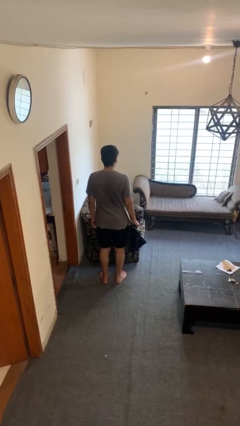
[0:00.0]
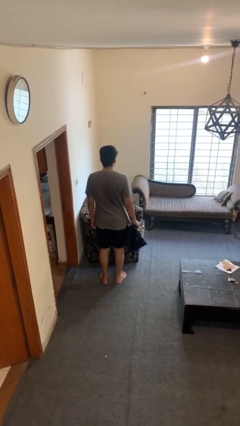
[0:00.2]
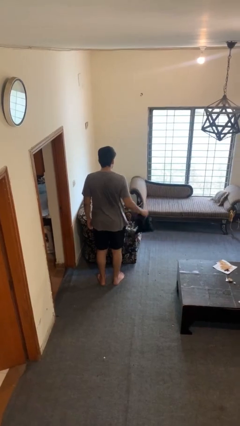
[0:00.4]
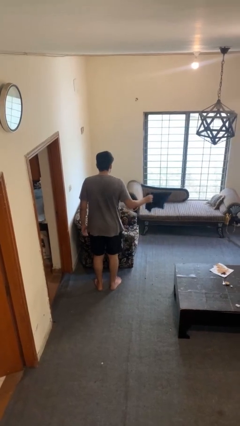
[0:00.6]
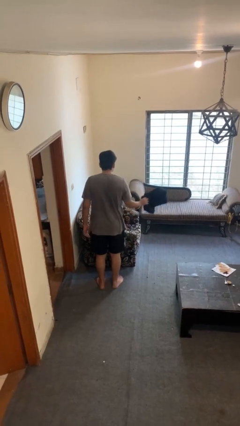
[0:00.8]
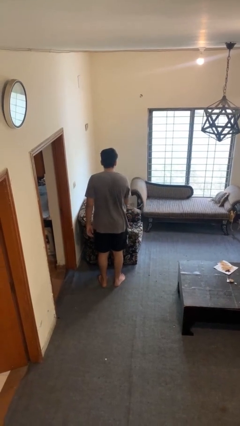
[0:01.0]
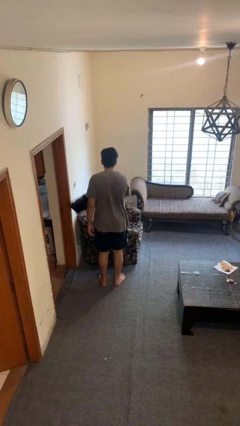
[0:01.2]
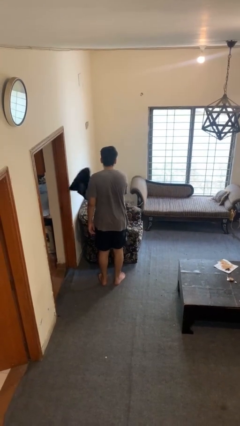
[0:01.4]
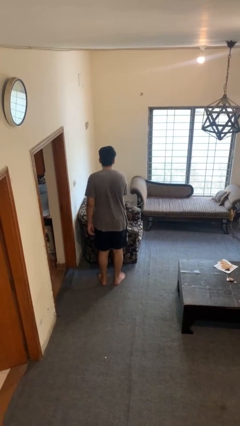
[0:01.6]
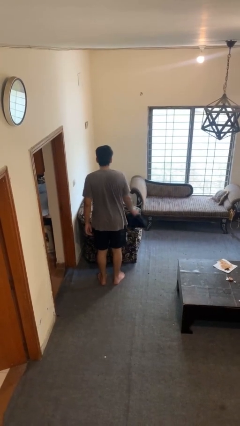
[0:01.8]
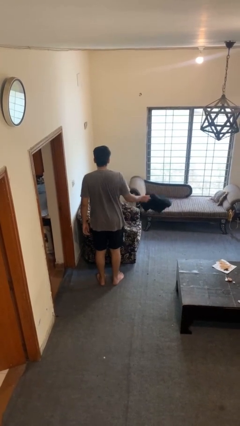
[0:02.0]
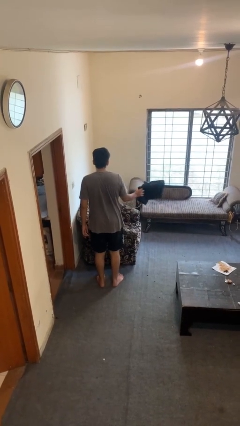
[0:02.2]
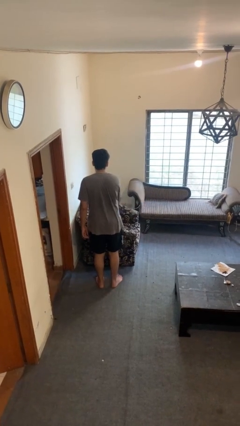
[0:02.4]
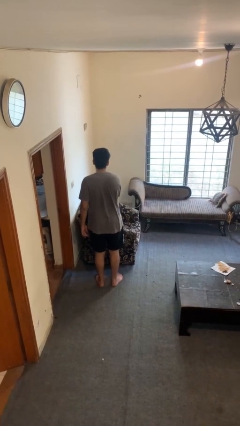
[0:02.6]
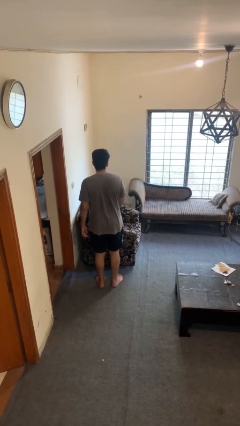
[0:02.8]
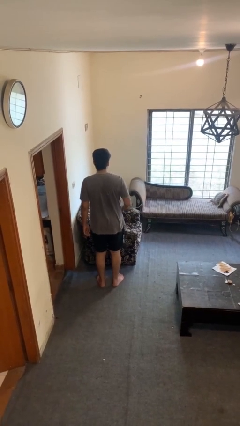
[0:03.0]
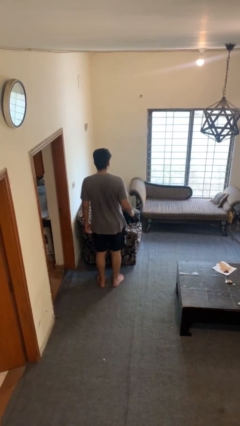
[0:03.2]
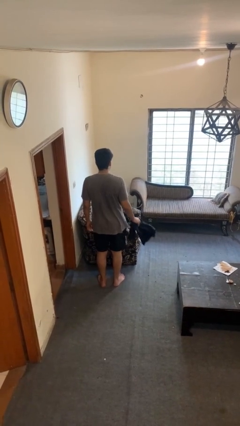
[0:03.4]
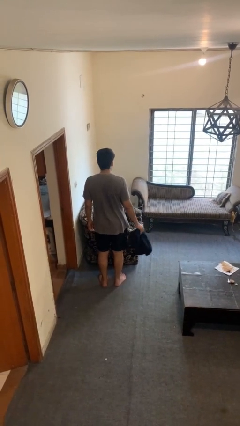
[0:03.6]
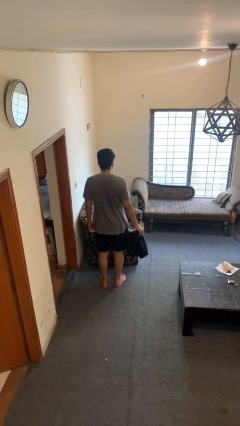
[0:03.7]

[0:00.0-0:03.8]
person dusts furniture

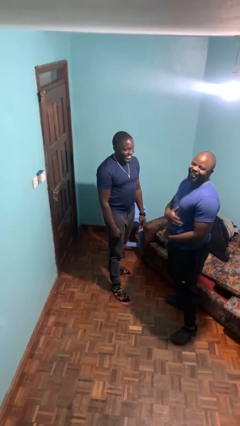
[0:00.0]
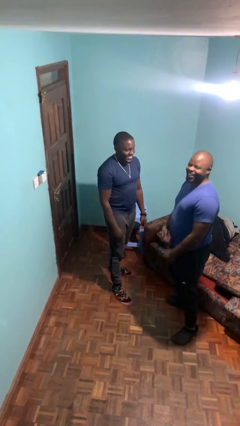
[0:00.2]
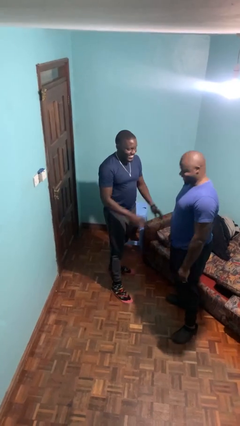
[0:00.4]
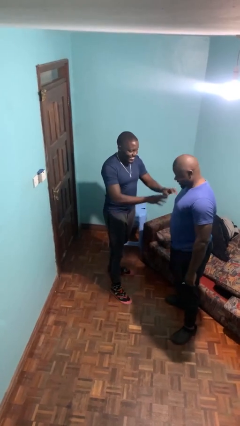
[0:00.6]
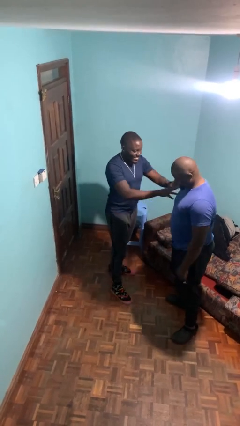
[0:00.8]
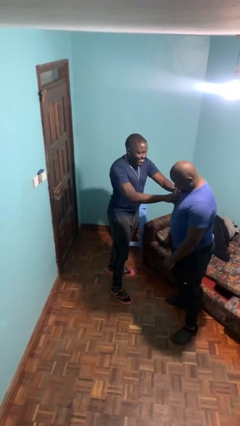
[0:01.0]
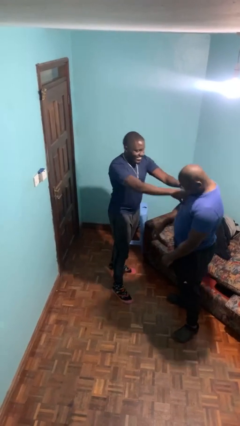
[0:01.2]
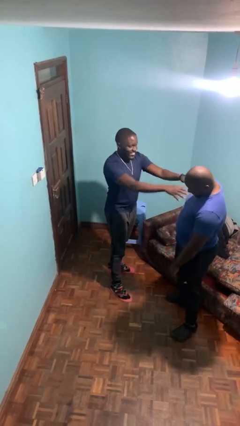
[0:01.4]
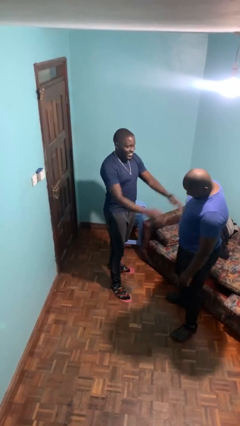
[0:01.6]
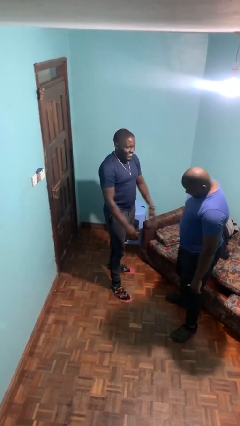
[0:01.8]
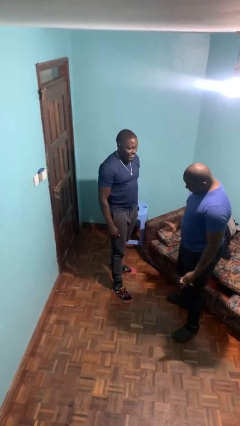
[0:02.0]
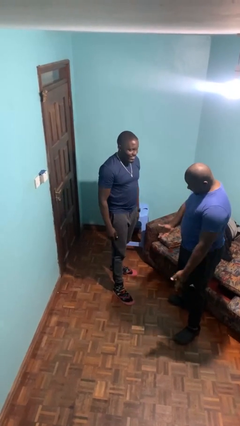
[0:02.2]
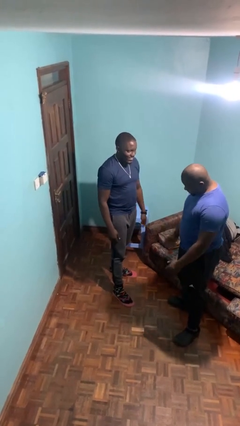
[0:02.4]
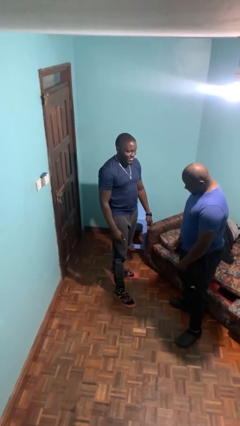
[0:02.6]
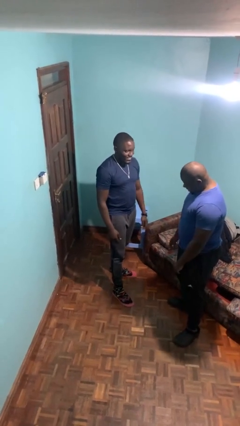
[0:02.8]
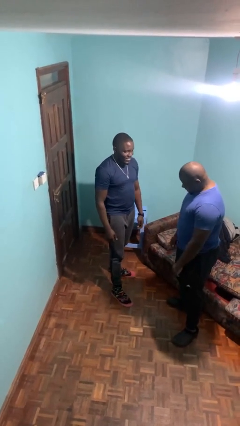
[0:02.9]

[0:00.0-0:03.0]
person shoves person

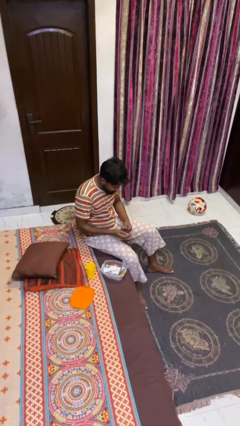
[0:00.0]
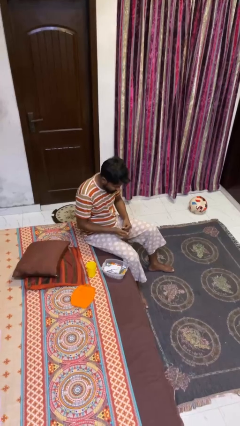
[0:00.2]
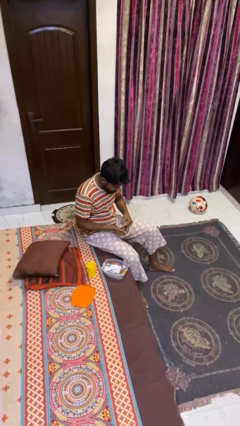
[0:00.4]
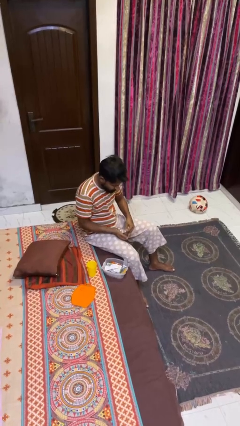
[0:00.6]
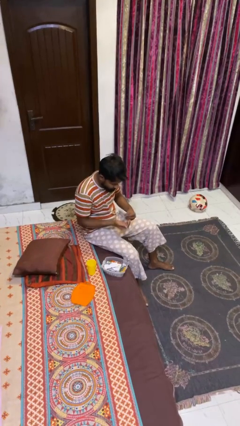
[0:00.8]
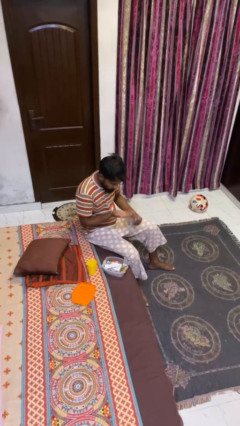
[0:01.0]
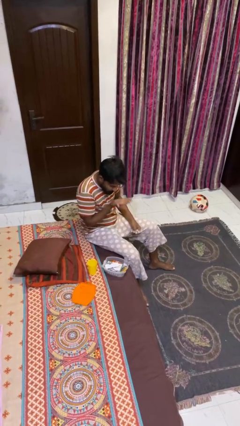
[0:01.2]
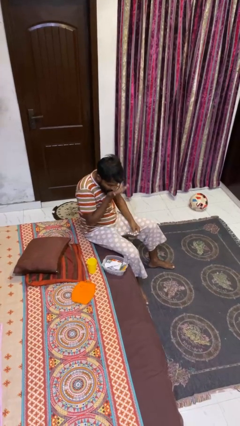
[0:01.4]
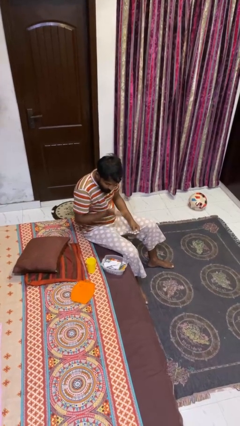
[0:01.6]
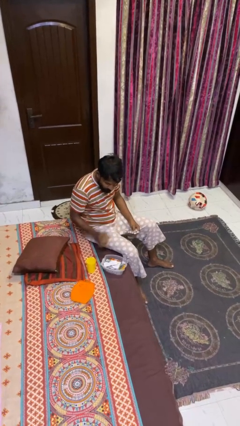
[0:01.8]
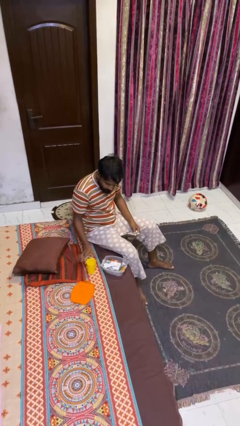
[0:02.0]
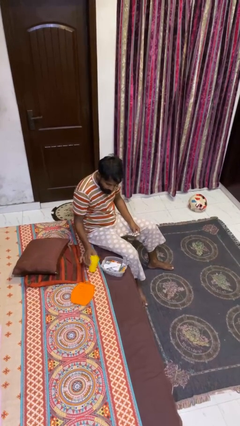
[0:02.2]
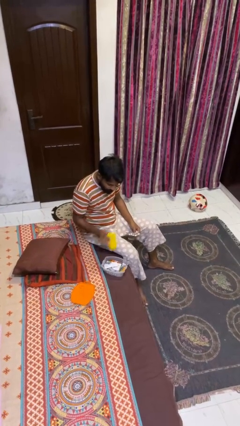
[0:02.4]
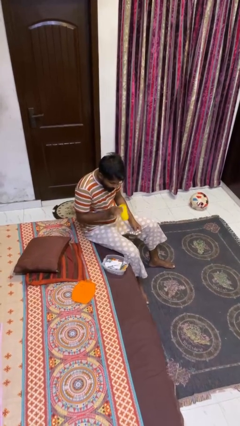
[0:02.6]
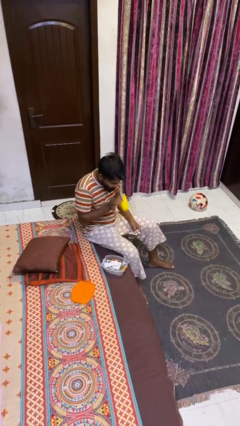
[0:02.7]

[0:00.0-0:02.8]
person takes medicine pills

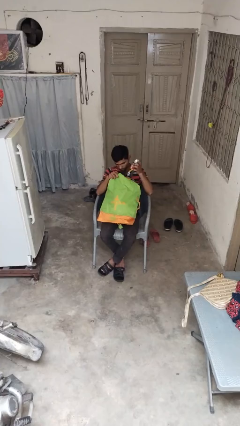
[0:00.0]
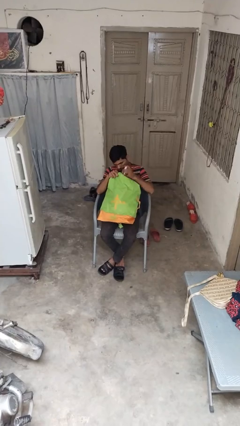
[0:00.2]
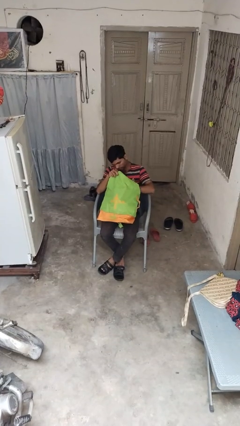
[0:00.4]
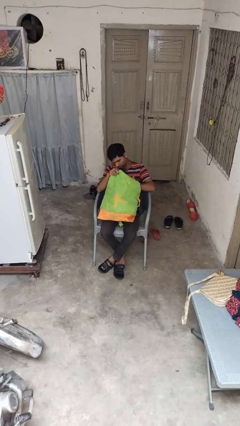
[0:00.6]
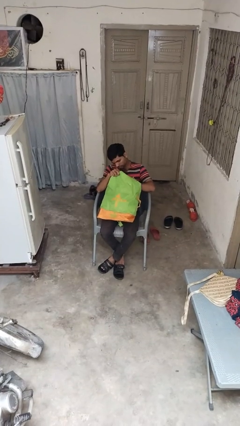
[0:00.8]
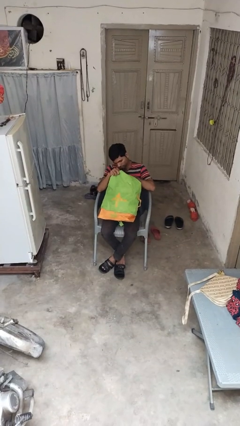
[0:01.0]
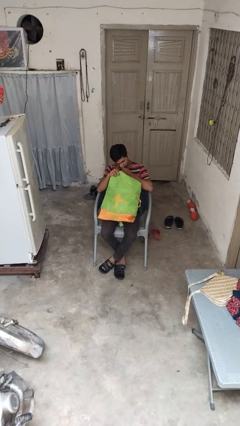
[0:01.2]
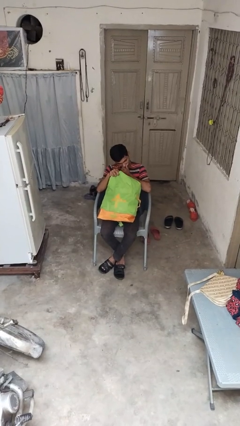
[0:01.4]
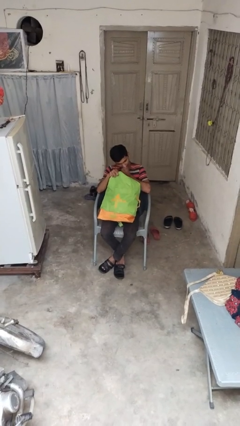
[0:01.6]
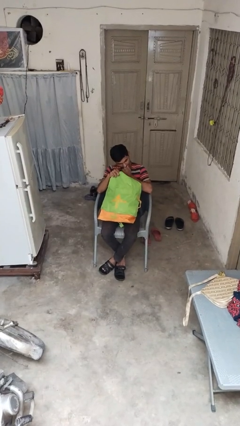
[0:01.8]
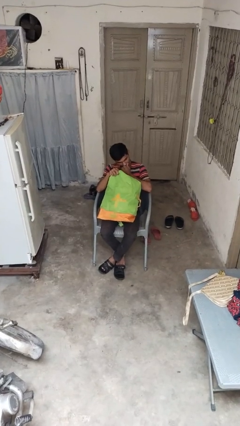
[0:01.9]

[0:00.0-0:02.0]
person puts object into backpack

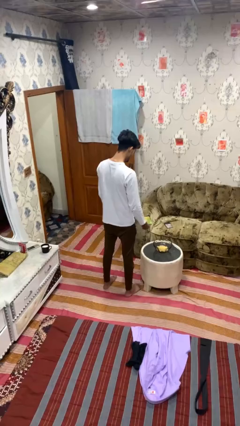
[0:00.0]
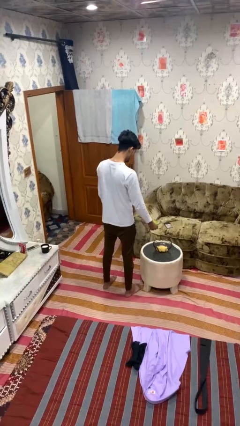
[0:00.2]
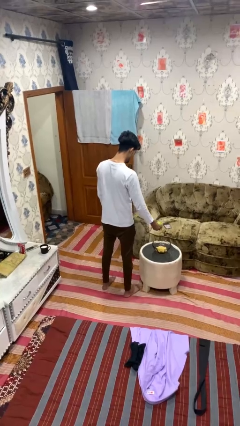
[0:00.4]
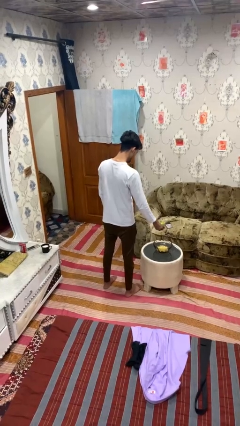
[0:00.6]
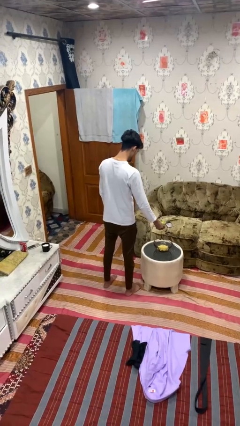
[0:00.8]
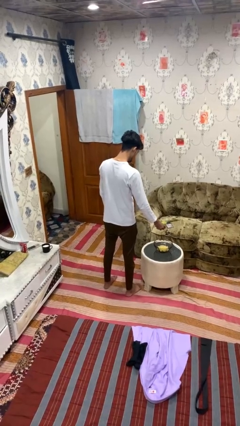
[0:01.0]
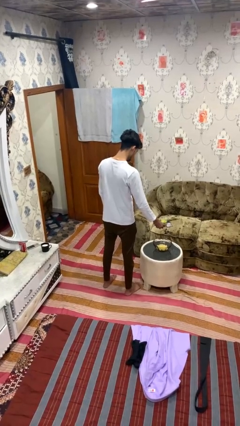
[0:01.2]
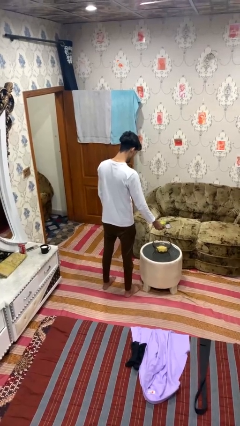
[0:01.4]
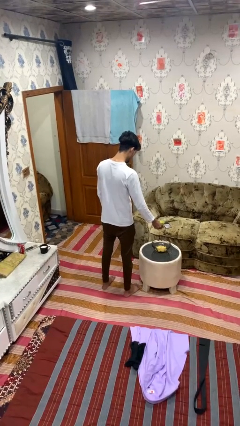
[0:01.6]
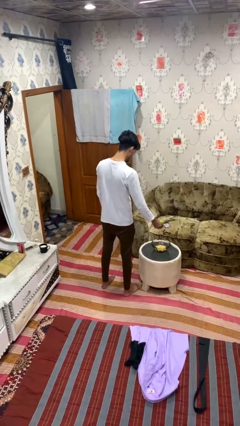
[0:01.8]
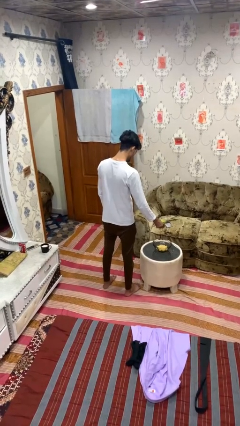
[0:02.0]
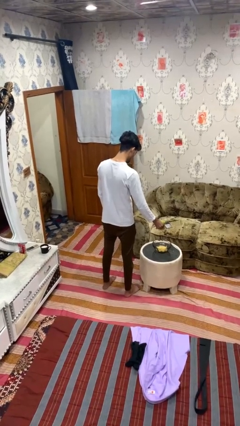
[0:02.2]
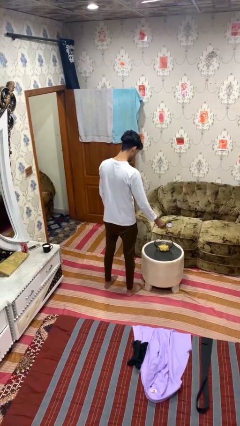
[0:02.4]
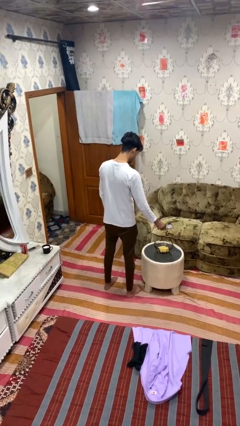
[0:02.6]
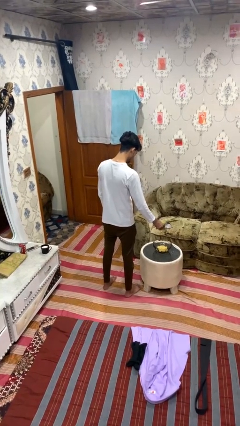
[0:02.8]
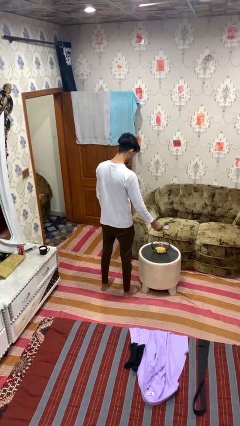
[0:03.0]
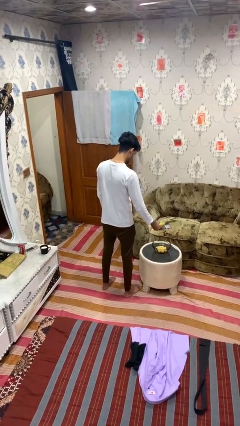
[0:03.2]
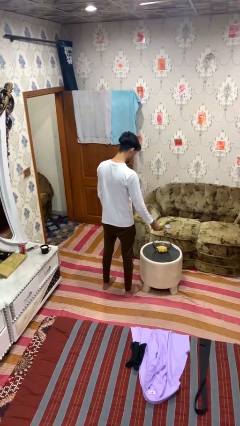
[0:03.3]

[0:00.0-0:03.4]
person pours into bowl

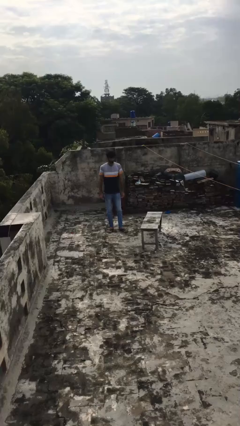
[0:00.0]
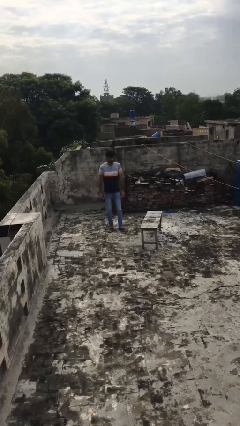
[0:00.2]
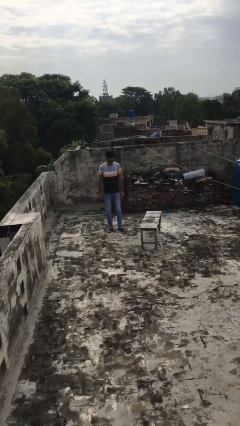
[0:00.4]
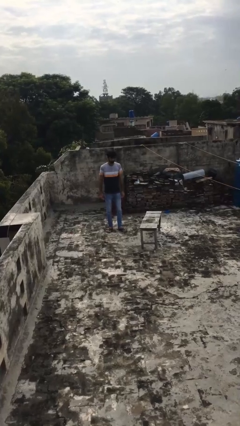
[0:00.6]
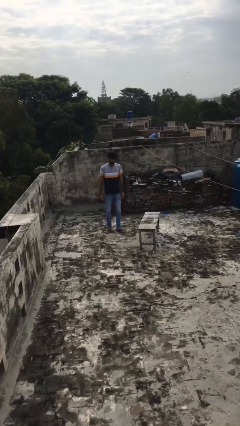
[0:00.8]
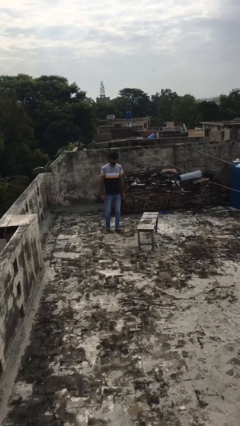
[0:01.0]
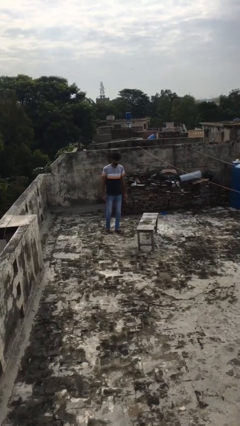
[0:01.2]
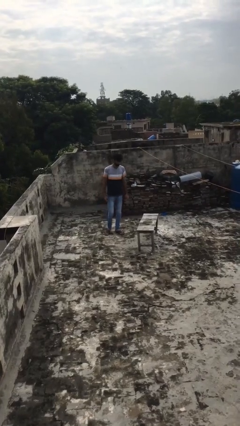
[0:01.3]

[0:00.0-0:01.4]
person picks up object from floor

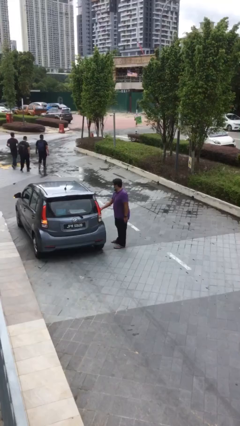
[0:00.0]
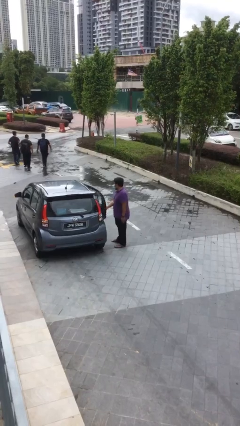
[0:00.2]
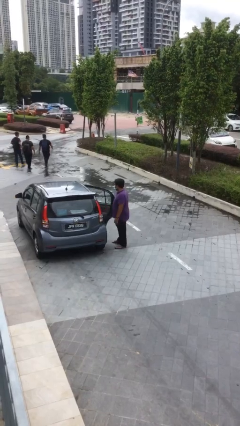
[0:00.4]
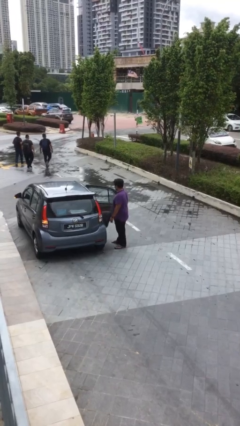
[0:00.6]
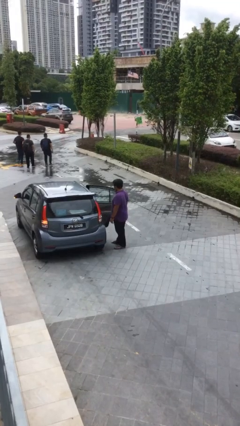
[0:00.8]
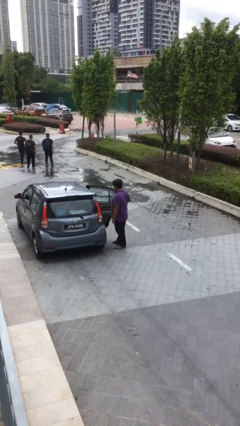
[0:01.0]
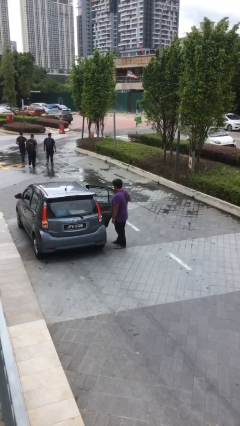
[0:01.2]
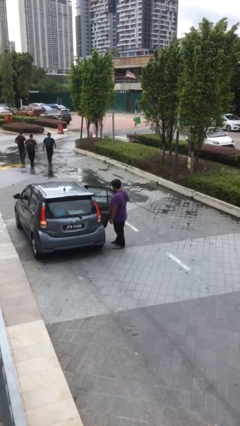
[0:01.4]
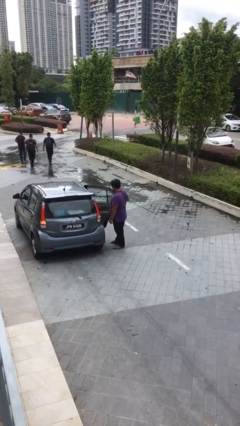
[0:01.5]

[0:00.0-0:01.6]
person opens car door
